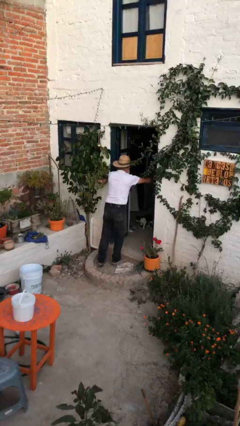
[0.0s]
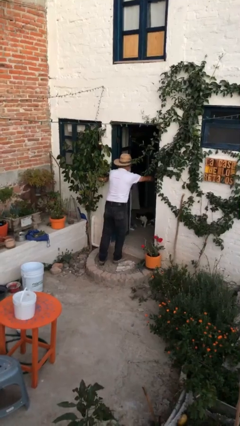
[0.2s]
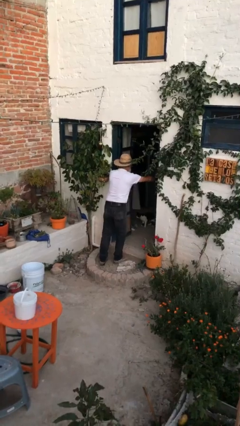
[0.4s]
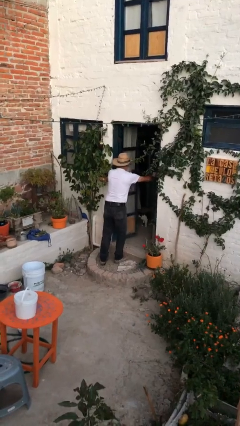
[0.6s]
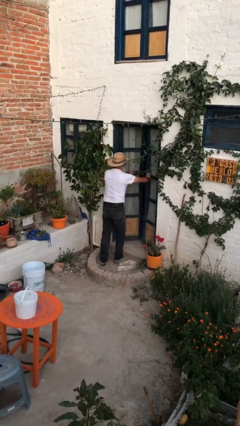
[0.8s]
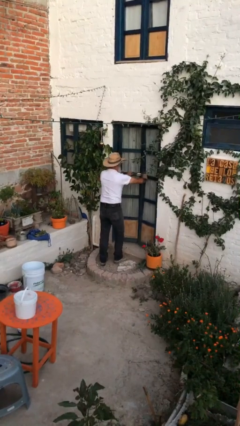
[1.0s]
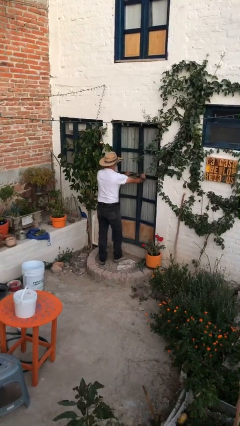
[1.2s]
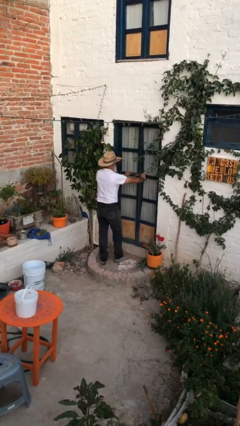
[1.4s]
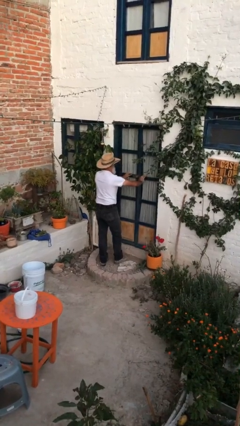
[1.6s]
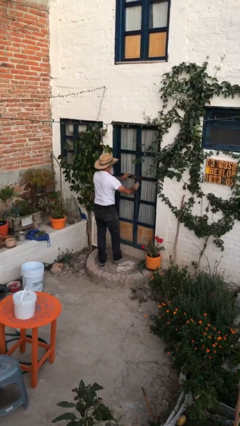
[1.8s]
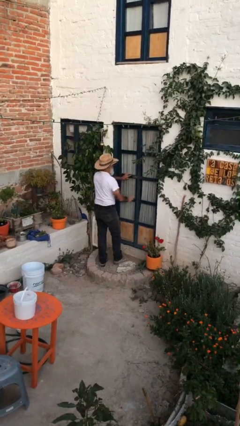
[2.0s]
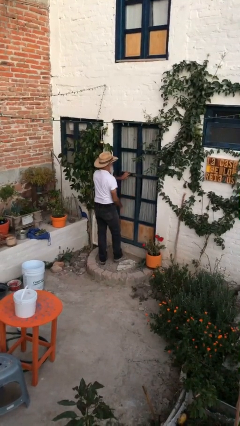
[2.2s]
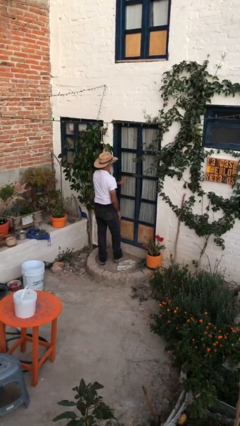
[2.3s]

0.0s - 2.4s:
person closes facility door

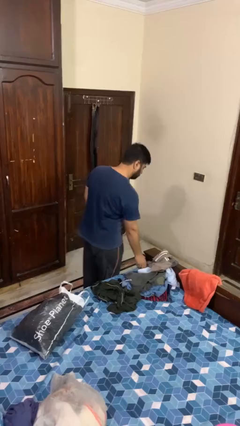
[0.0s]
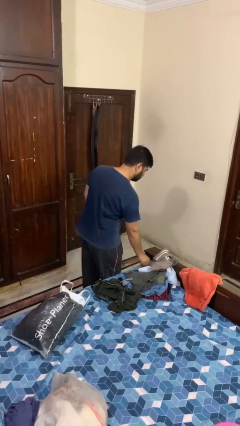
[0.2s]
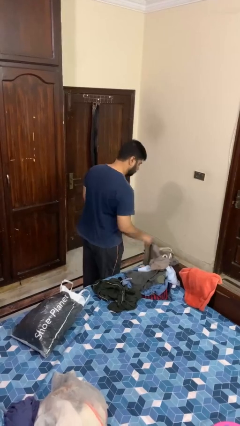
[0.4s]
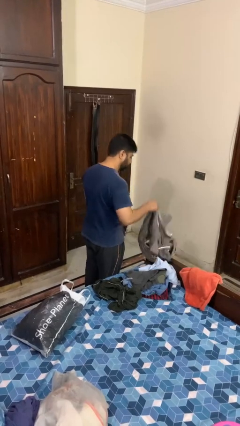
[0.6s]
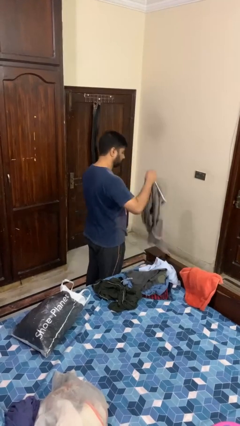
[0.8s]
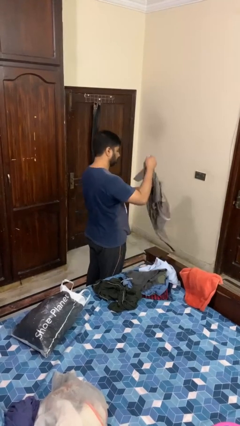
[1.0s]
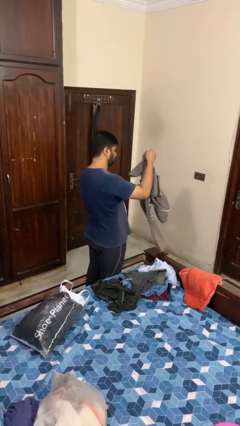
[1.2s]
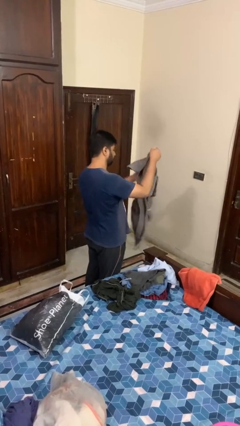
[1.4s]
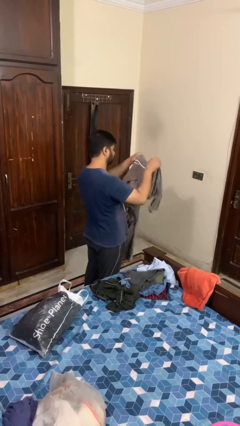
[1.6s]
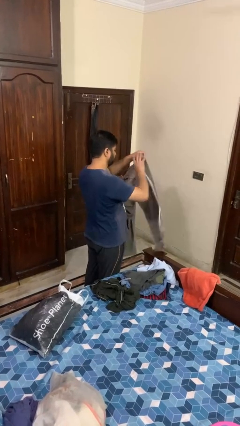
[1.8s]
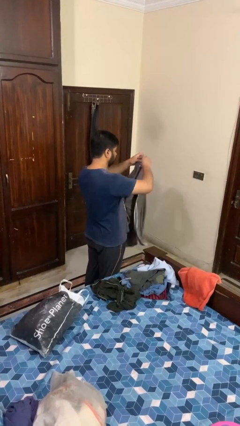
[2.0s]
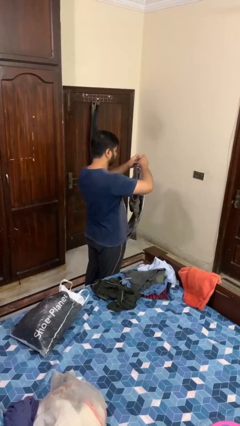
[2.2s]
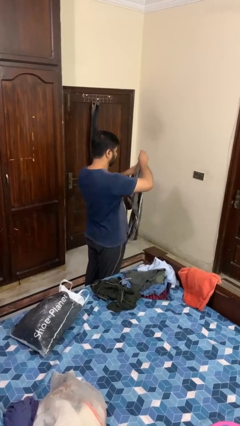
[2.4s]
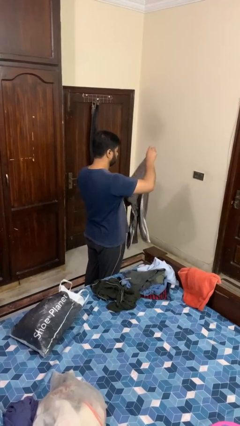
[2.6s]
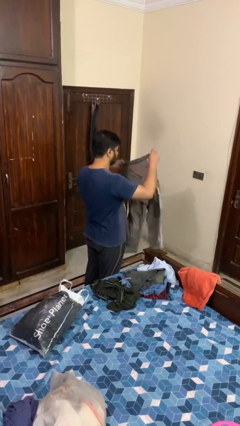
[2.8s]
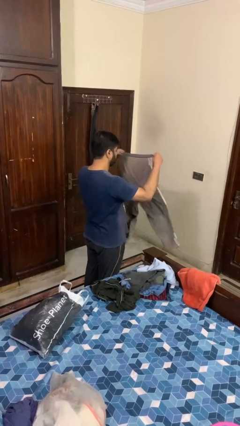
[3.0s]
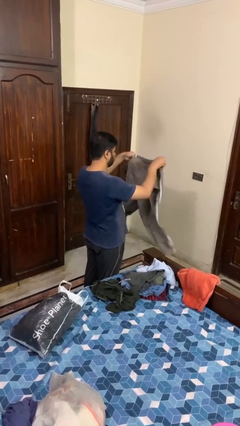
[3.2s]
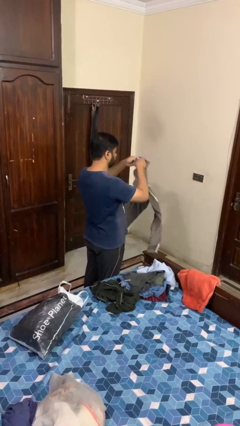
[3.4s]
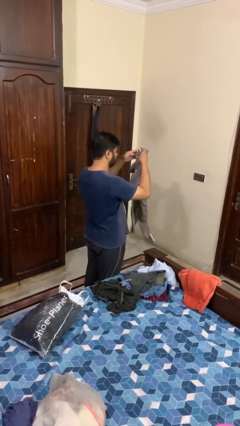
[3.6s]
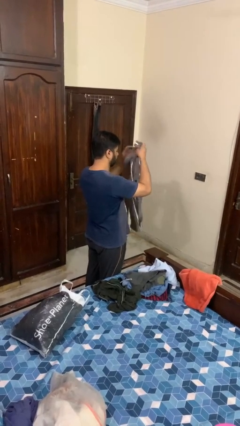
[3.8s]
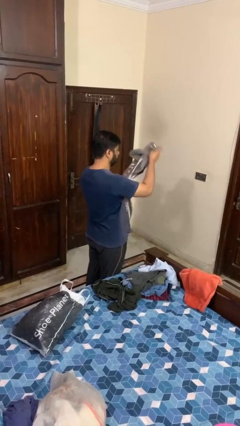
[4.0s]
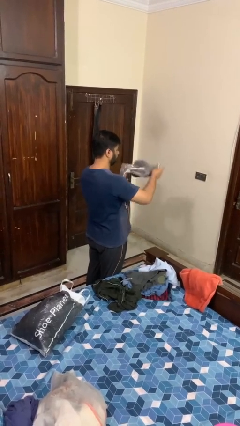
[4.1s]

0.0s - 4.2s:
person folds pants

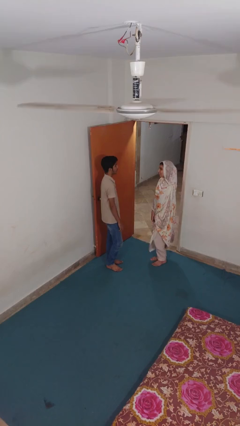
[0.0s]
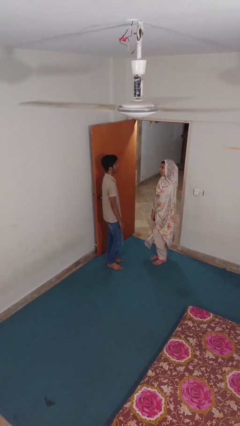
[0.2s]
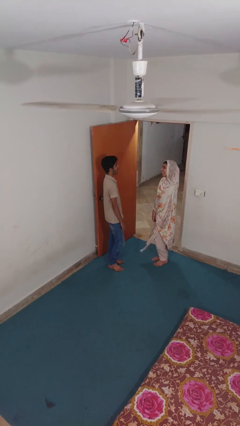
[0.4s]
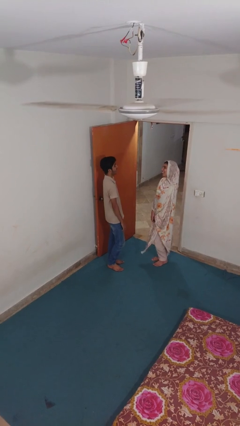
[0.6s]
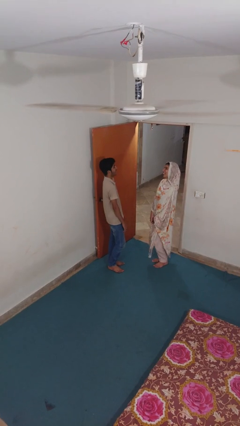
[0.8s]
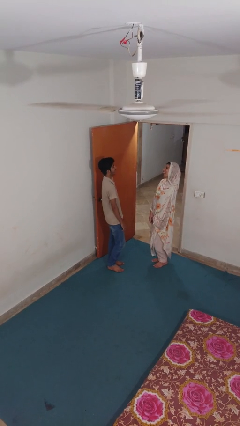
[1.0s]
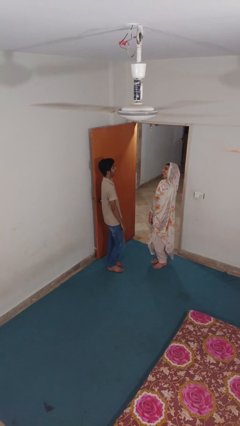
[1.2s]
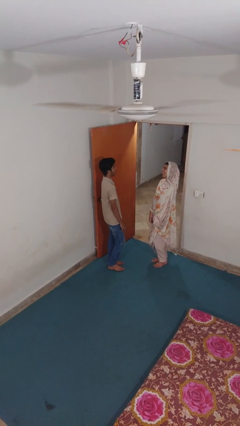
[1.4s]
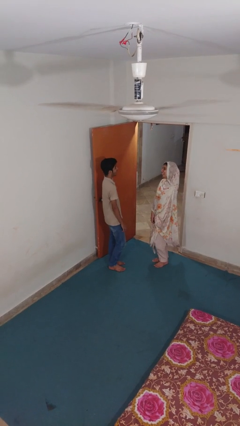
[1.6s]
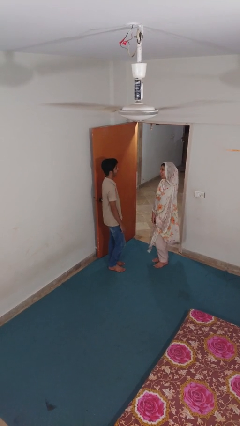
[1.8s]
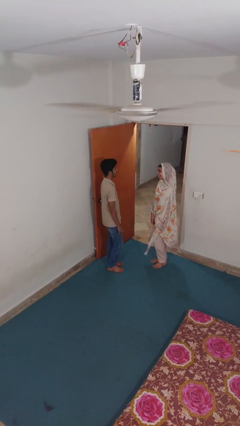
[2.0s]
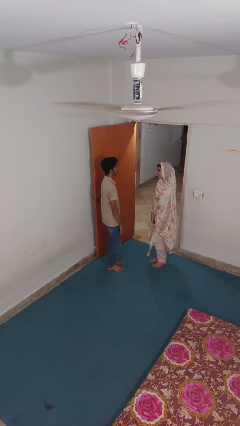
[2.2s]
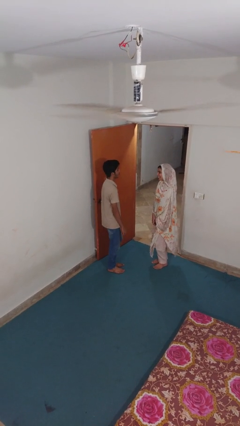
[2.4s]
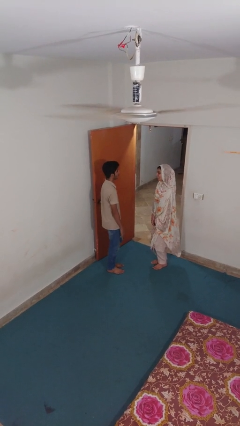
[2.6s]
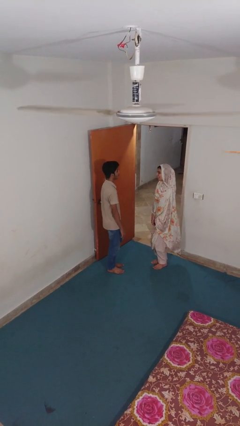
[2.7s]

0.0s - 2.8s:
person laughs with person

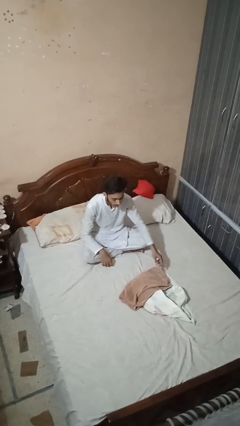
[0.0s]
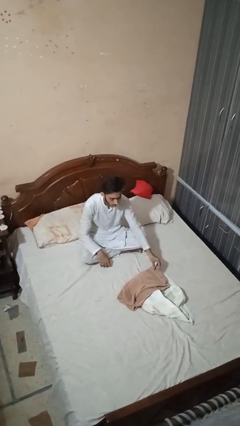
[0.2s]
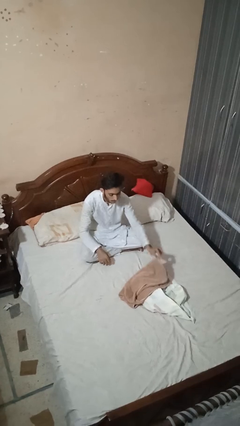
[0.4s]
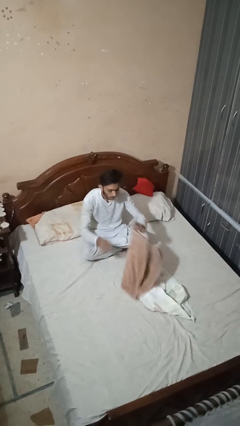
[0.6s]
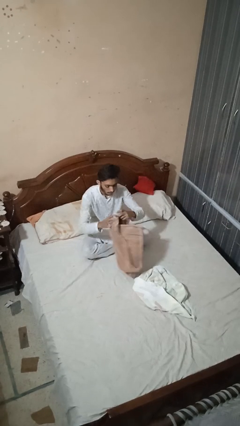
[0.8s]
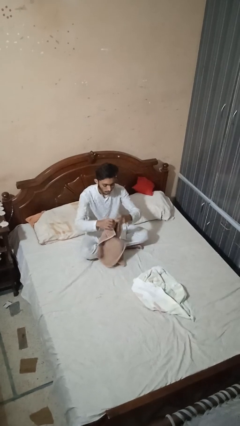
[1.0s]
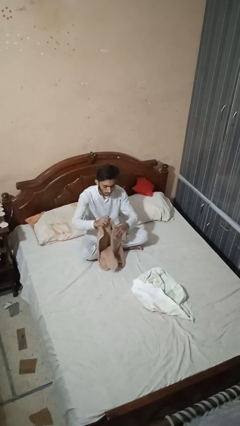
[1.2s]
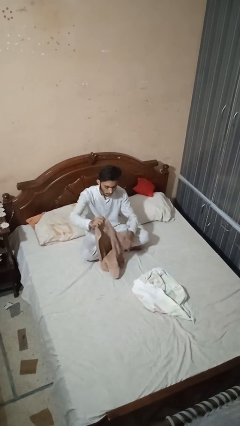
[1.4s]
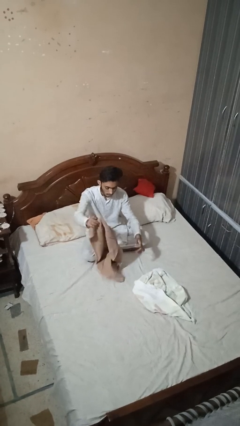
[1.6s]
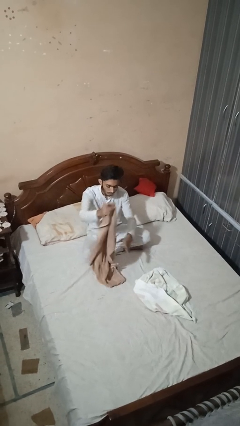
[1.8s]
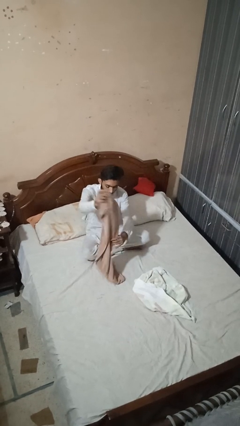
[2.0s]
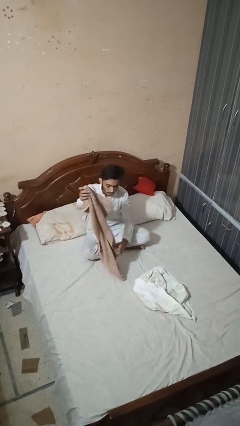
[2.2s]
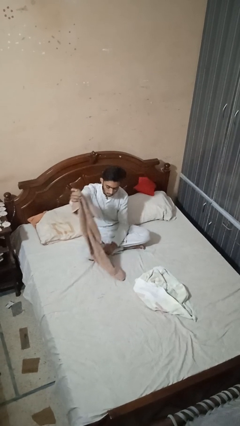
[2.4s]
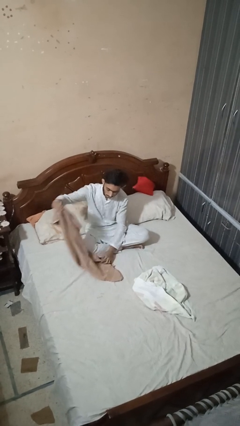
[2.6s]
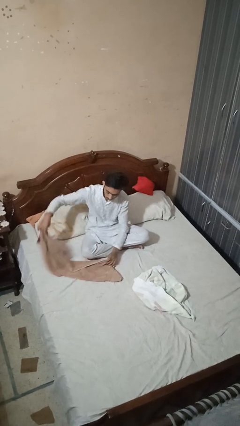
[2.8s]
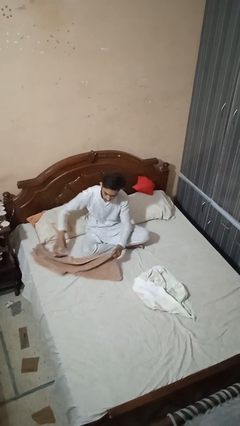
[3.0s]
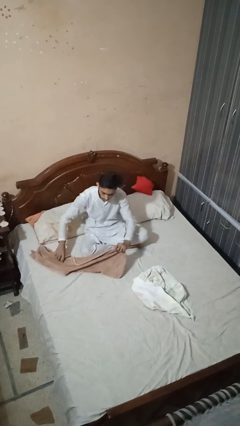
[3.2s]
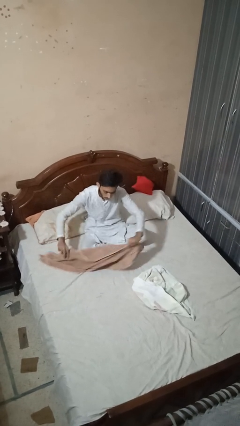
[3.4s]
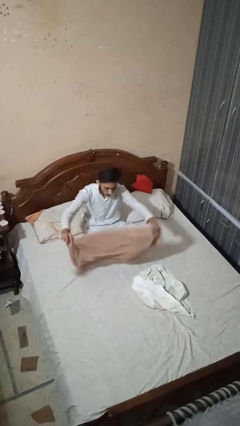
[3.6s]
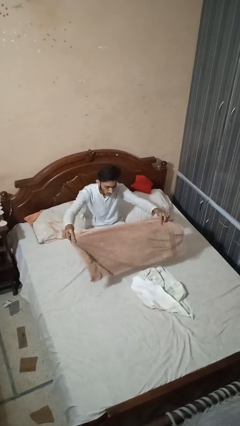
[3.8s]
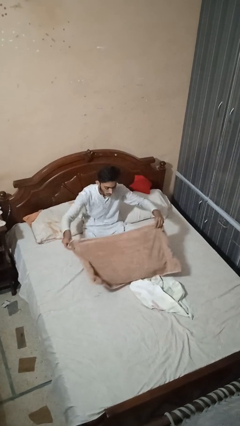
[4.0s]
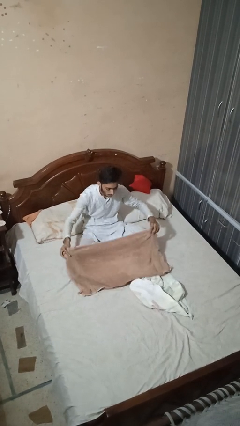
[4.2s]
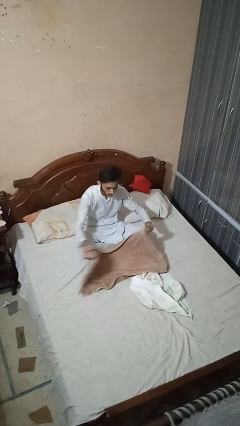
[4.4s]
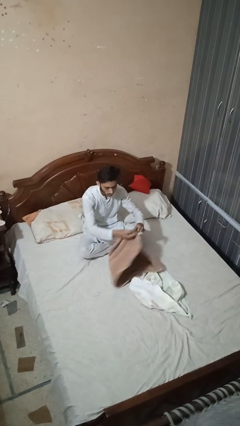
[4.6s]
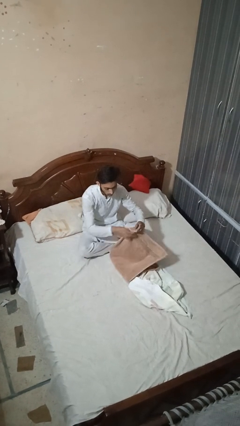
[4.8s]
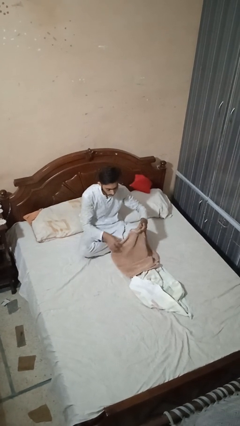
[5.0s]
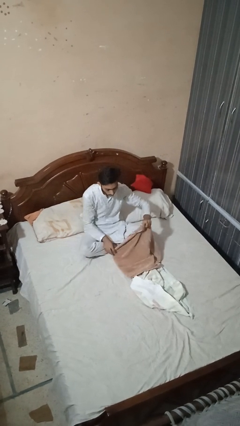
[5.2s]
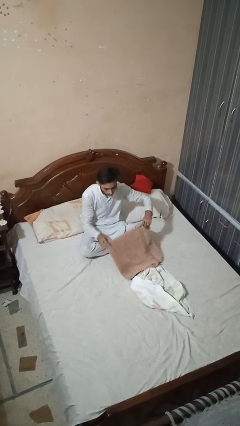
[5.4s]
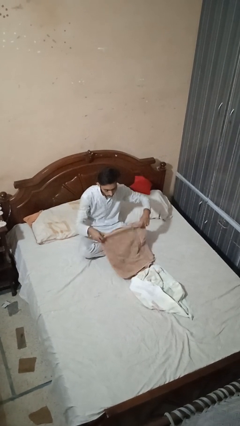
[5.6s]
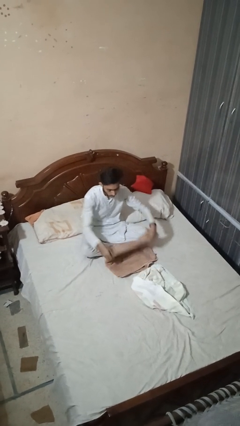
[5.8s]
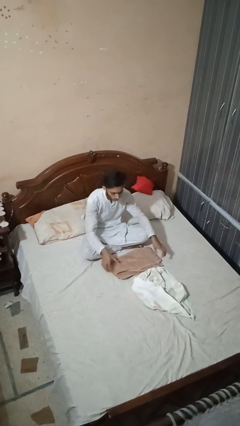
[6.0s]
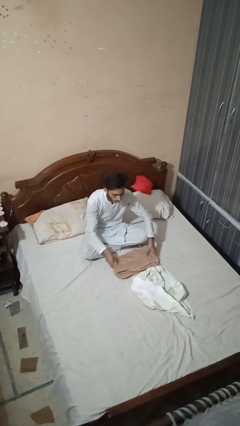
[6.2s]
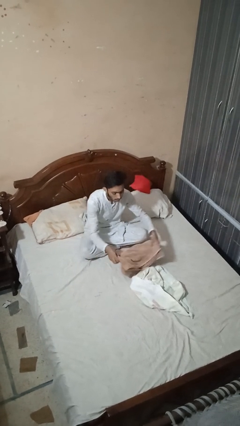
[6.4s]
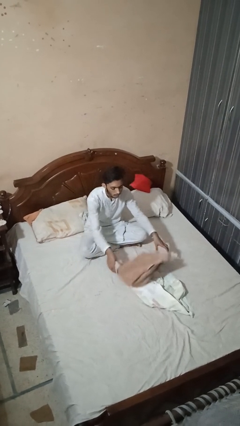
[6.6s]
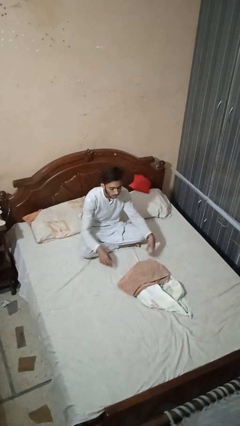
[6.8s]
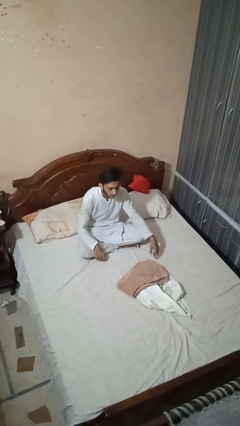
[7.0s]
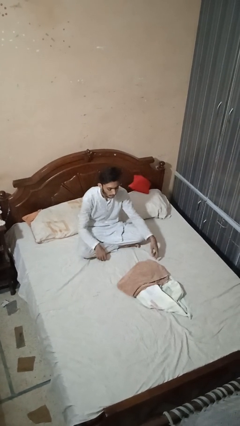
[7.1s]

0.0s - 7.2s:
person folds towel

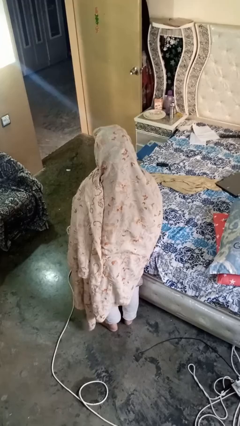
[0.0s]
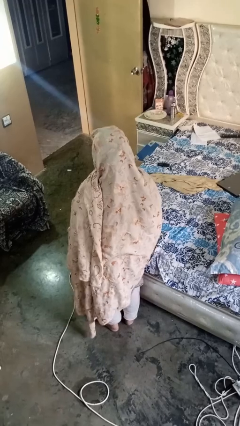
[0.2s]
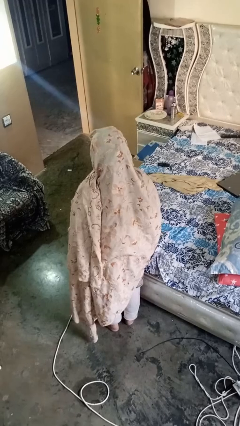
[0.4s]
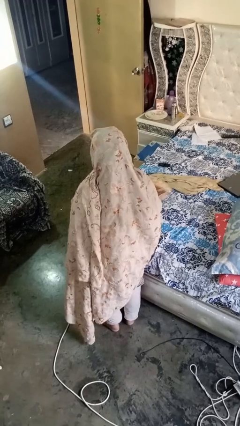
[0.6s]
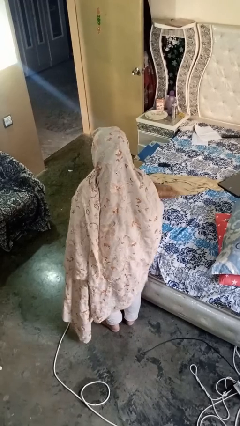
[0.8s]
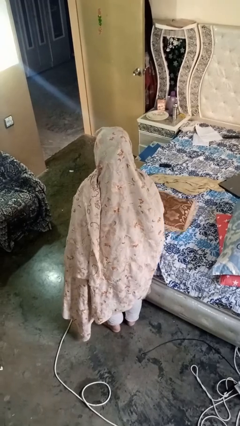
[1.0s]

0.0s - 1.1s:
person puts down object on bed
